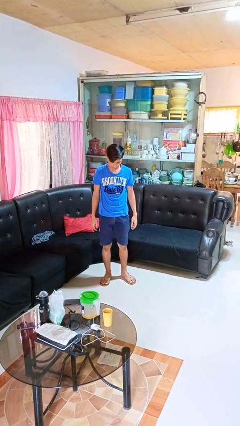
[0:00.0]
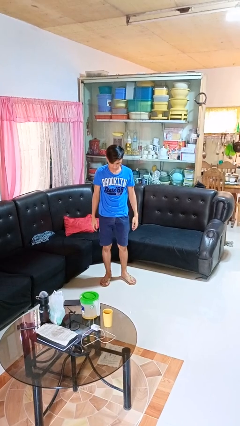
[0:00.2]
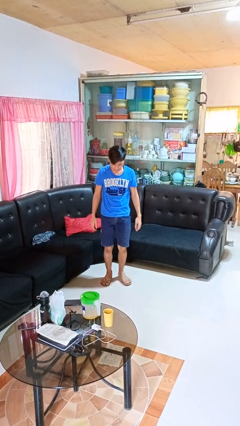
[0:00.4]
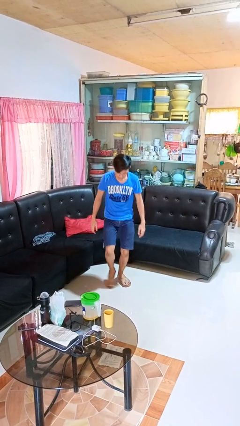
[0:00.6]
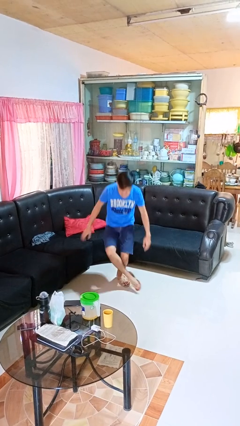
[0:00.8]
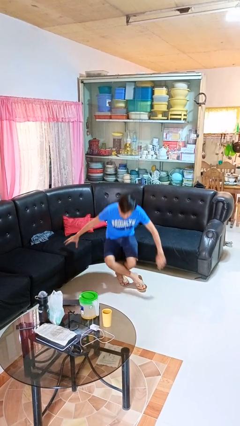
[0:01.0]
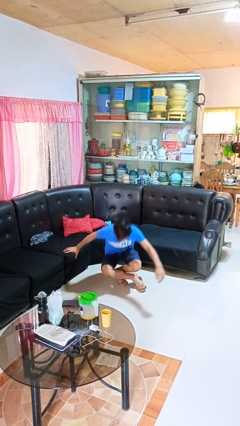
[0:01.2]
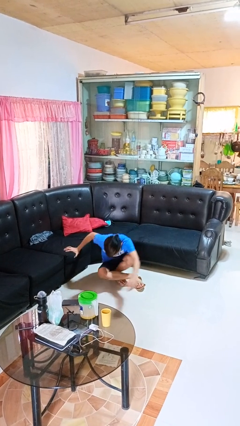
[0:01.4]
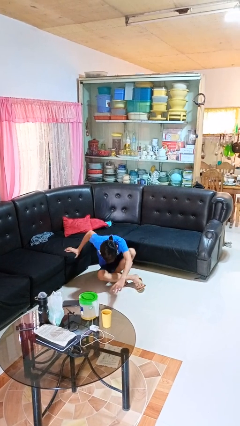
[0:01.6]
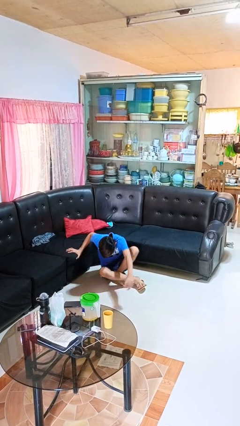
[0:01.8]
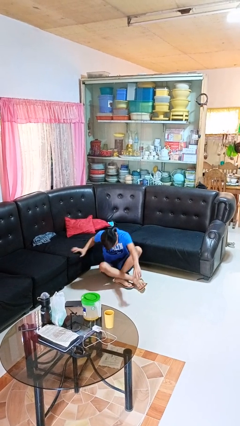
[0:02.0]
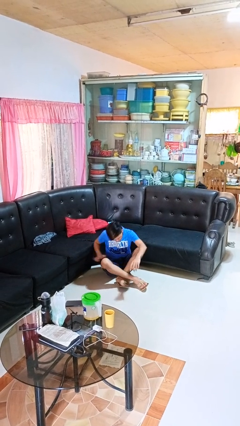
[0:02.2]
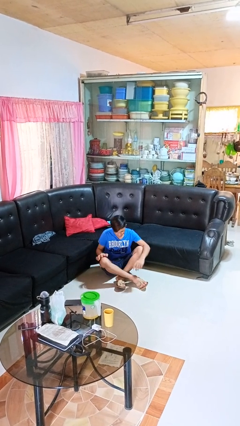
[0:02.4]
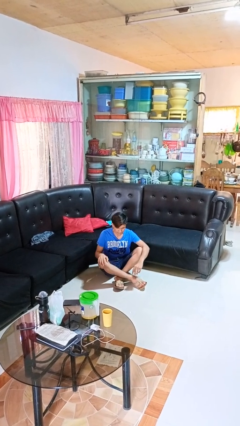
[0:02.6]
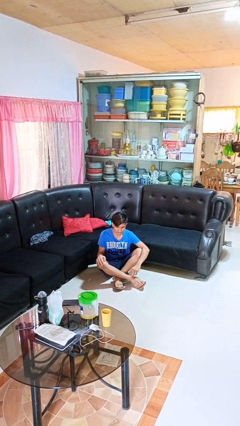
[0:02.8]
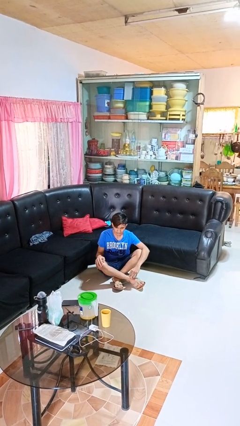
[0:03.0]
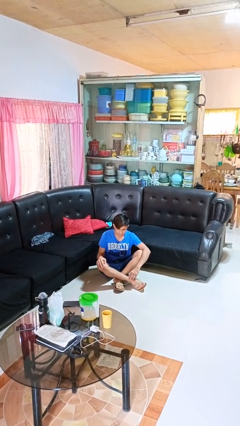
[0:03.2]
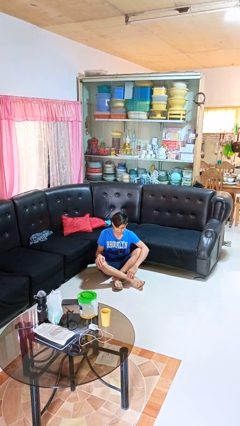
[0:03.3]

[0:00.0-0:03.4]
person sits crisscross

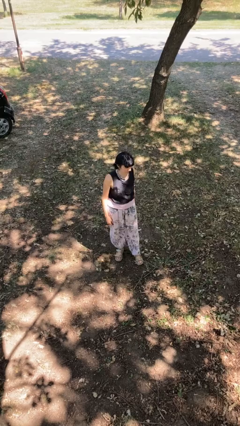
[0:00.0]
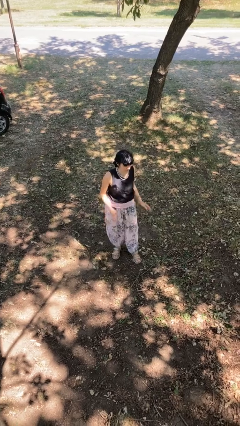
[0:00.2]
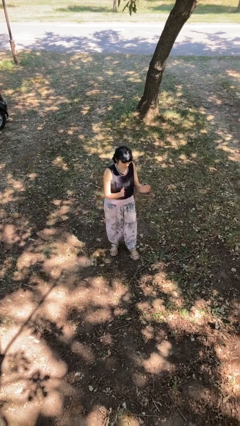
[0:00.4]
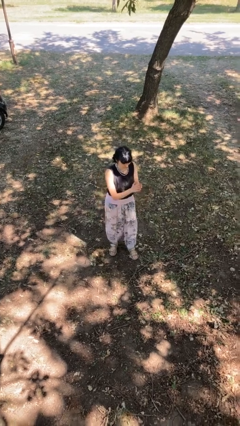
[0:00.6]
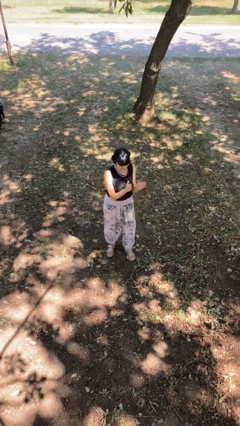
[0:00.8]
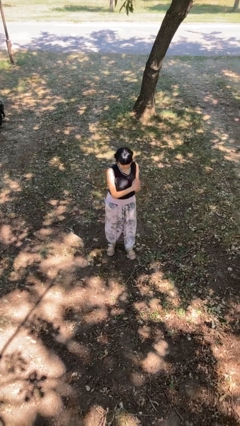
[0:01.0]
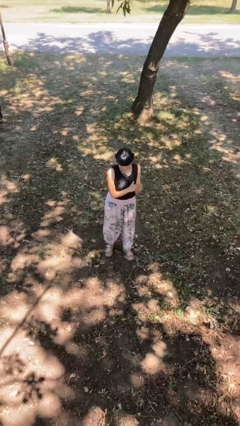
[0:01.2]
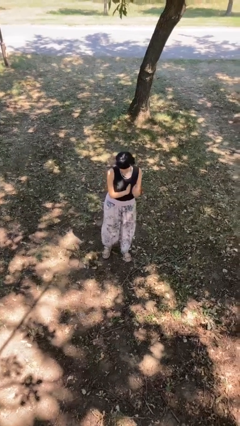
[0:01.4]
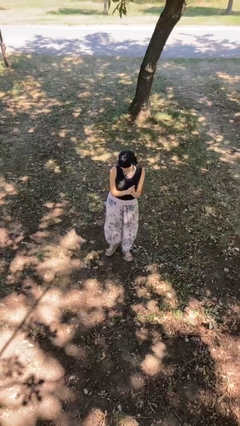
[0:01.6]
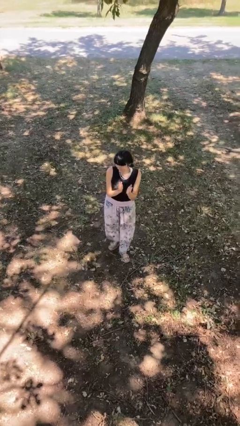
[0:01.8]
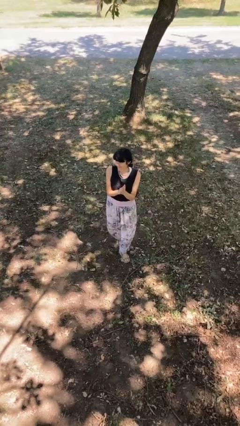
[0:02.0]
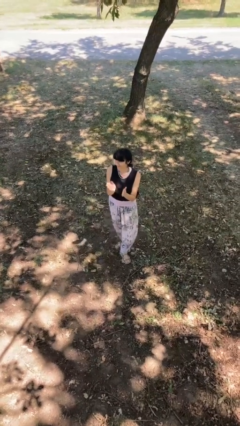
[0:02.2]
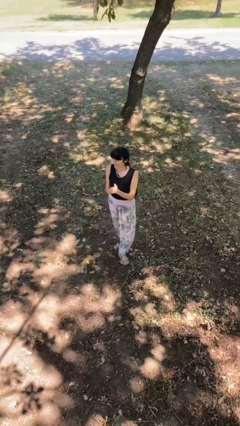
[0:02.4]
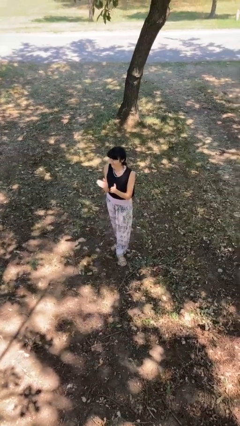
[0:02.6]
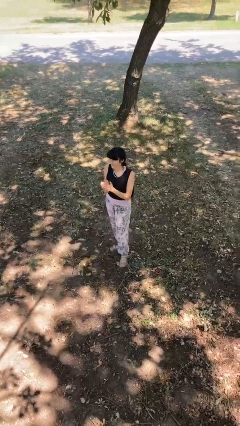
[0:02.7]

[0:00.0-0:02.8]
person claps hands

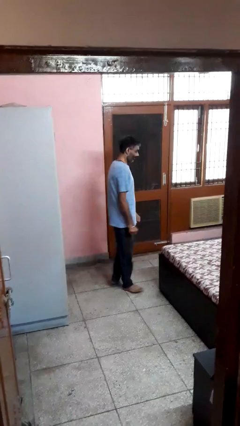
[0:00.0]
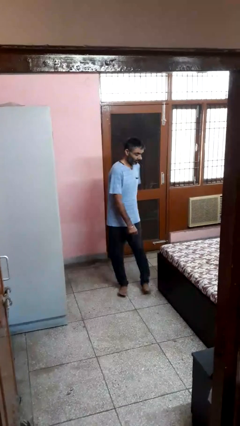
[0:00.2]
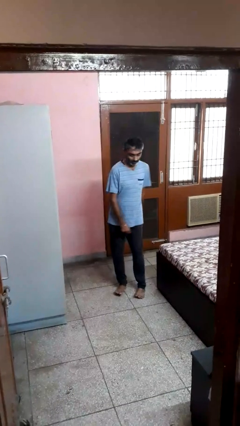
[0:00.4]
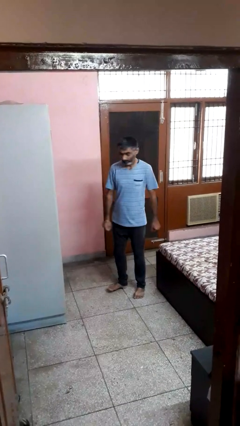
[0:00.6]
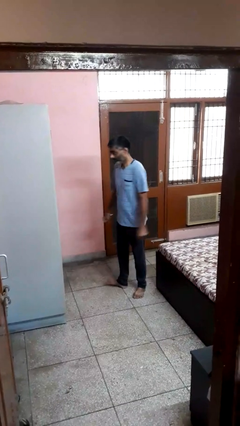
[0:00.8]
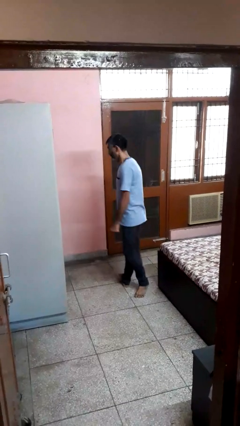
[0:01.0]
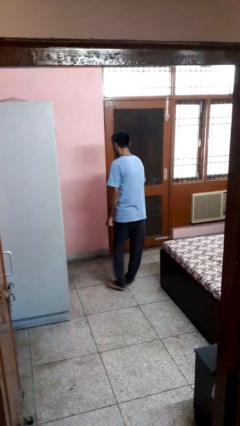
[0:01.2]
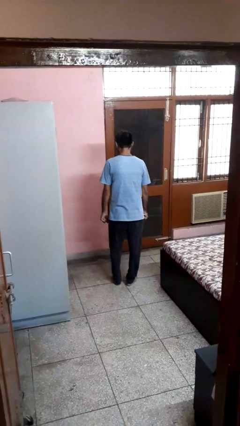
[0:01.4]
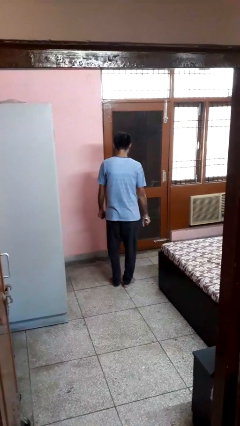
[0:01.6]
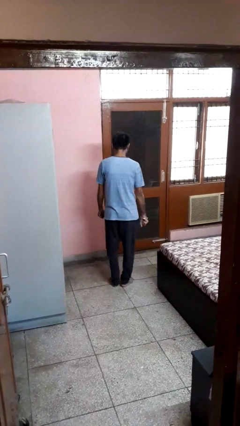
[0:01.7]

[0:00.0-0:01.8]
person twirls

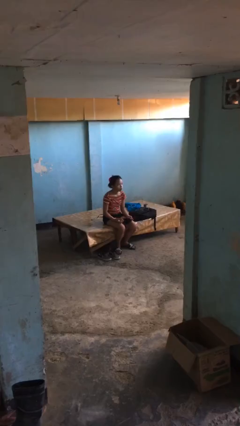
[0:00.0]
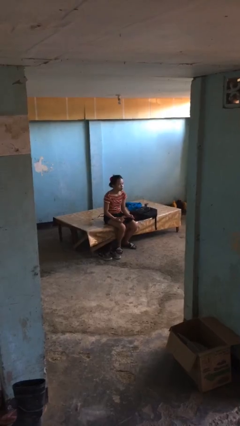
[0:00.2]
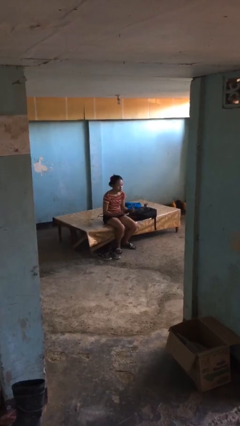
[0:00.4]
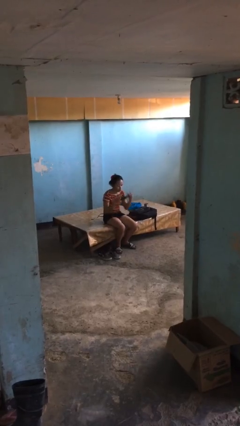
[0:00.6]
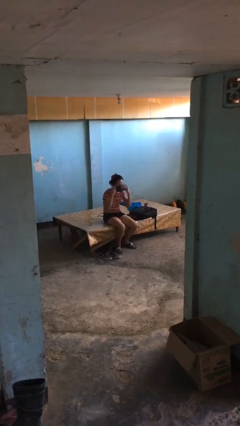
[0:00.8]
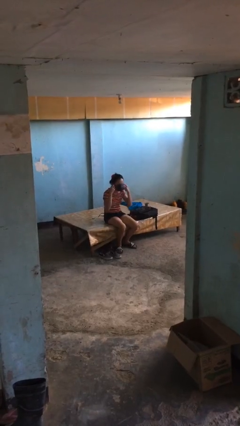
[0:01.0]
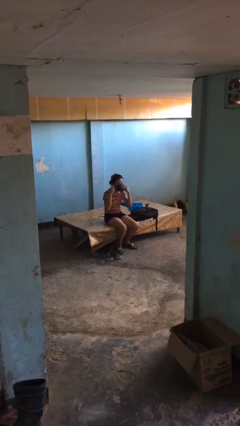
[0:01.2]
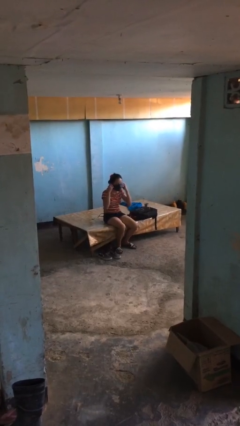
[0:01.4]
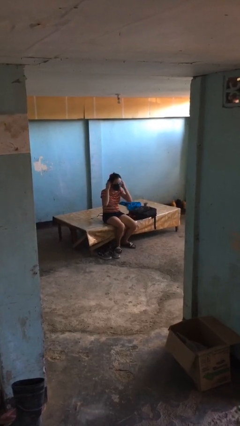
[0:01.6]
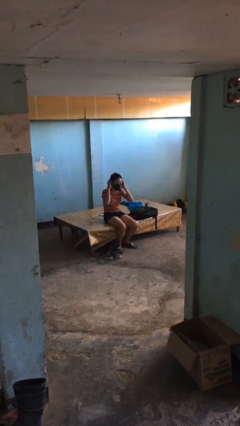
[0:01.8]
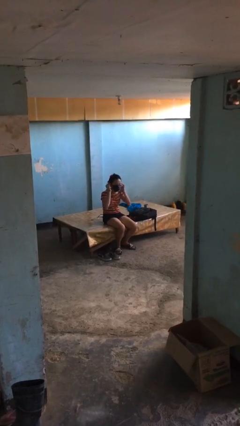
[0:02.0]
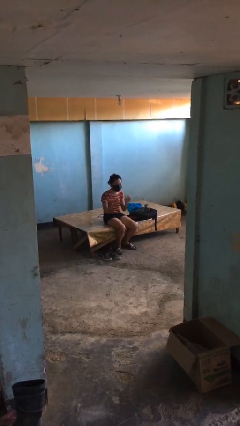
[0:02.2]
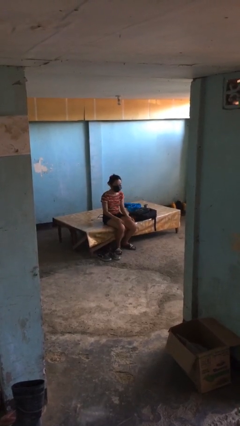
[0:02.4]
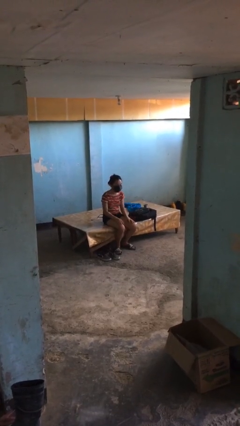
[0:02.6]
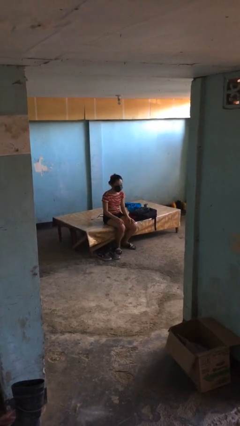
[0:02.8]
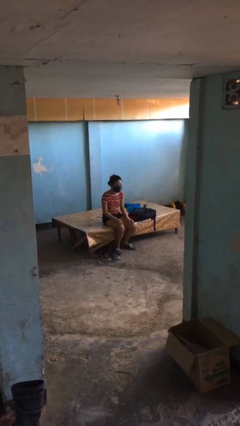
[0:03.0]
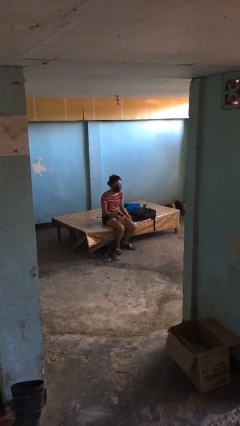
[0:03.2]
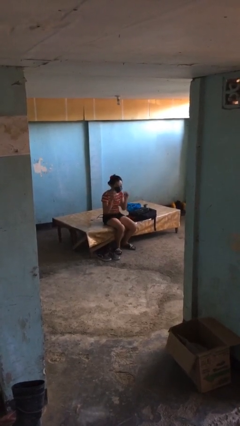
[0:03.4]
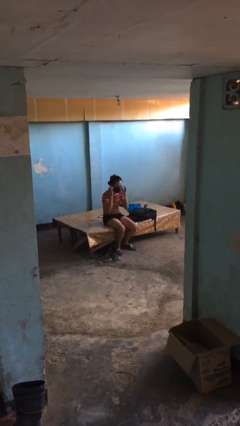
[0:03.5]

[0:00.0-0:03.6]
person puts on facemask

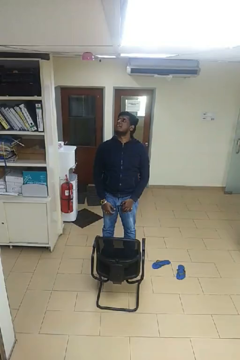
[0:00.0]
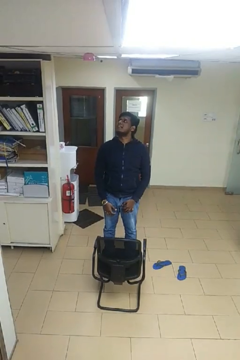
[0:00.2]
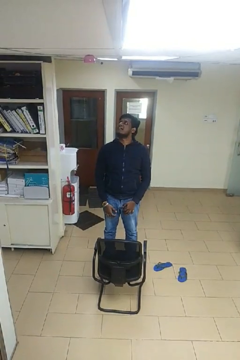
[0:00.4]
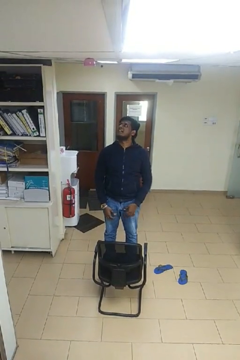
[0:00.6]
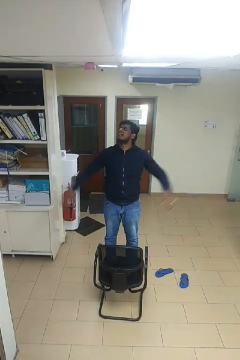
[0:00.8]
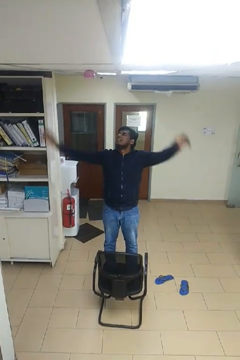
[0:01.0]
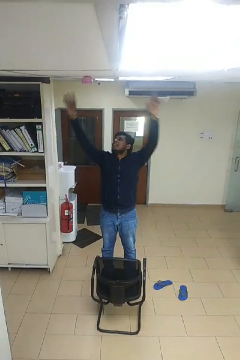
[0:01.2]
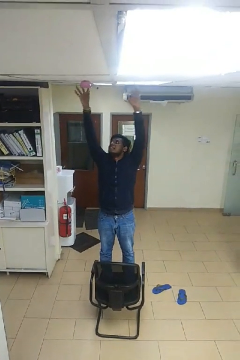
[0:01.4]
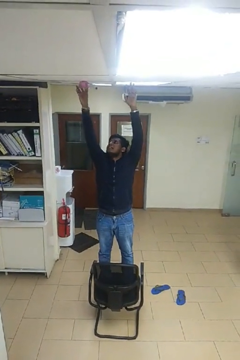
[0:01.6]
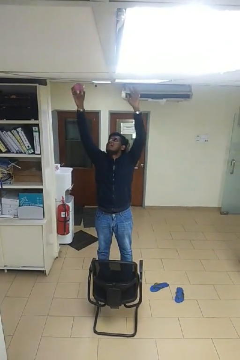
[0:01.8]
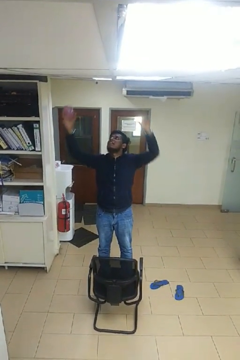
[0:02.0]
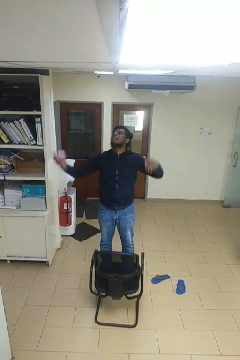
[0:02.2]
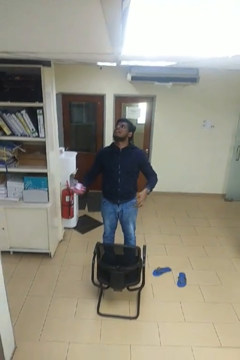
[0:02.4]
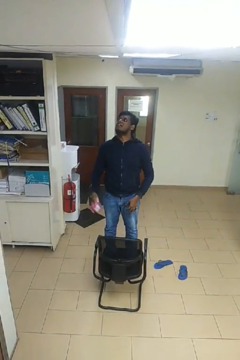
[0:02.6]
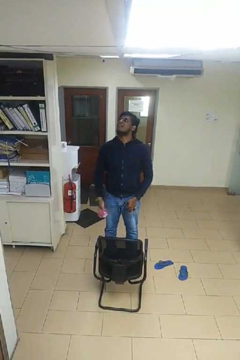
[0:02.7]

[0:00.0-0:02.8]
person takes down smoke detector

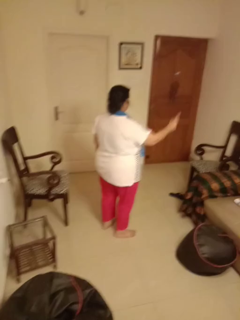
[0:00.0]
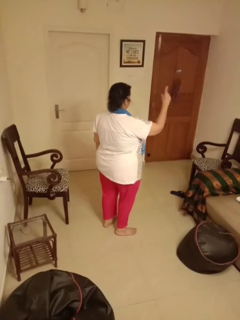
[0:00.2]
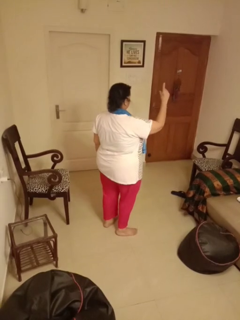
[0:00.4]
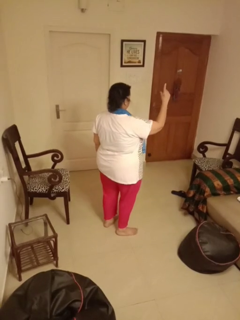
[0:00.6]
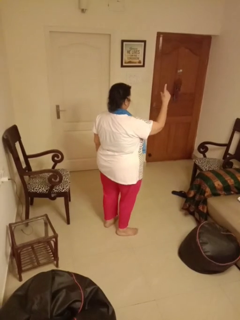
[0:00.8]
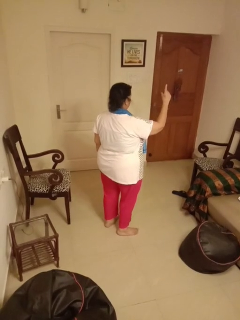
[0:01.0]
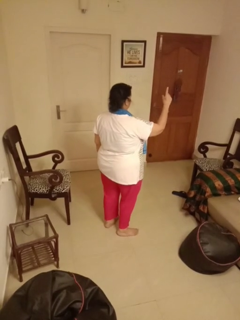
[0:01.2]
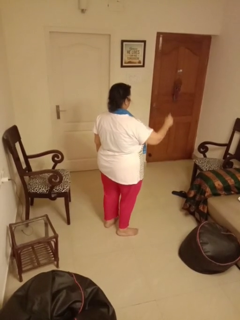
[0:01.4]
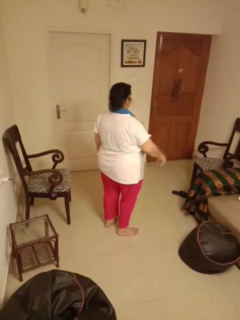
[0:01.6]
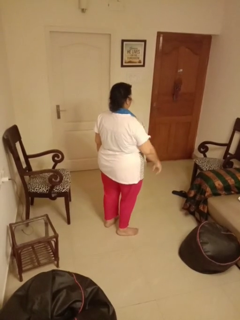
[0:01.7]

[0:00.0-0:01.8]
person gestures number one

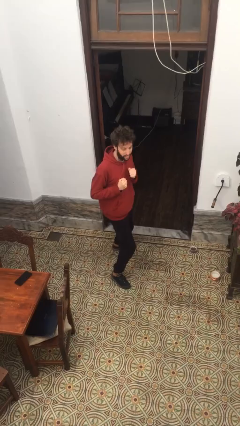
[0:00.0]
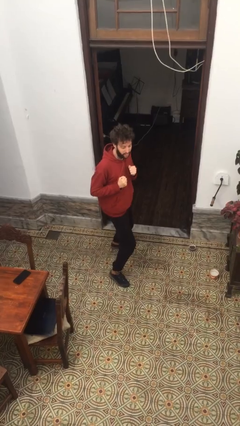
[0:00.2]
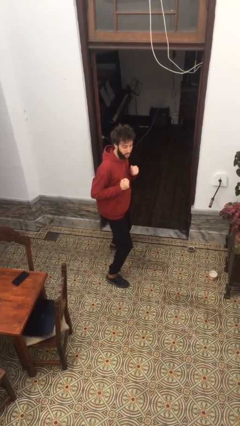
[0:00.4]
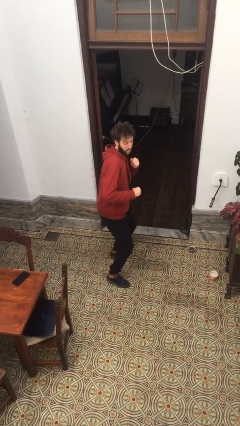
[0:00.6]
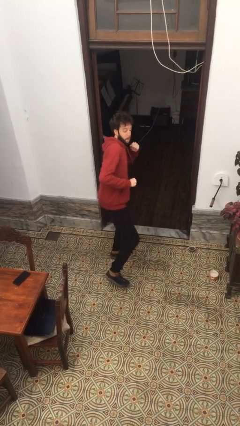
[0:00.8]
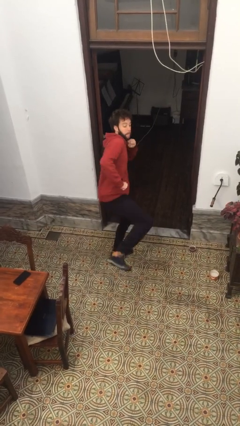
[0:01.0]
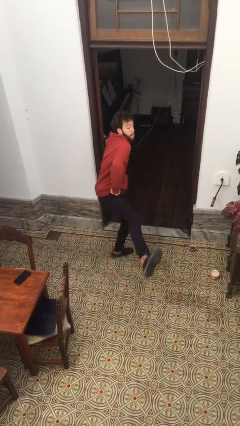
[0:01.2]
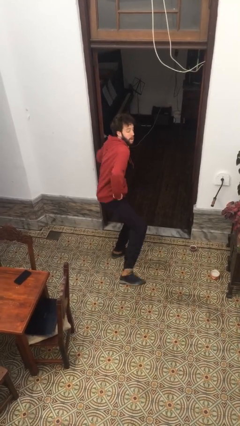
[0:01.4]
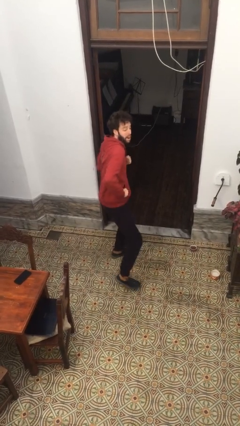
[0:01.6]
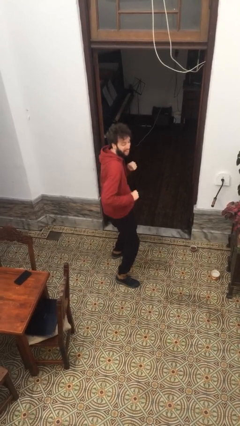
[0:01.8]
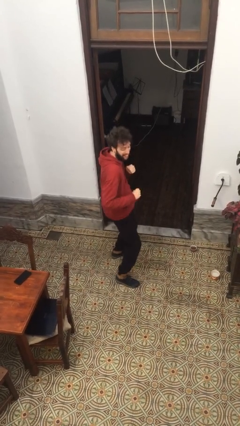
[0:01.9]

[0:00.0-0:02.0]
person karate kicks
